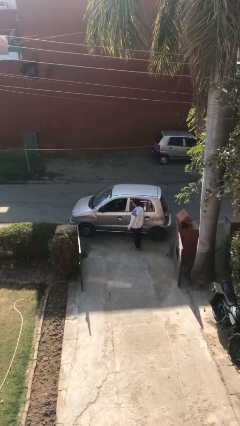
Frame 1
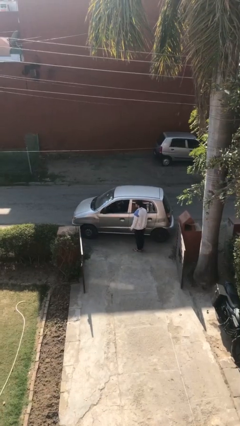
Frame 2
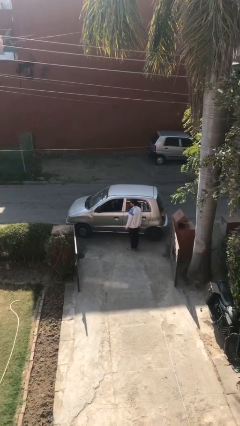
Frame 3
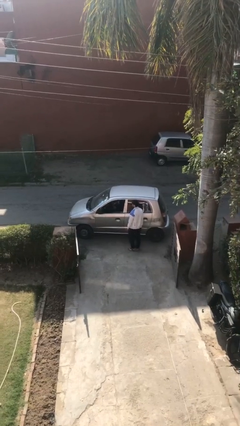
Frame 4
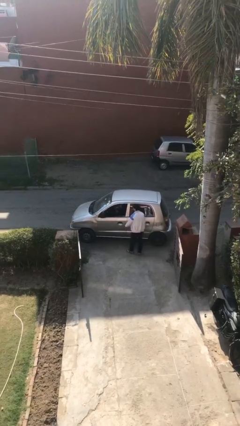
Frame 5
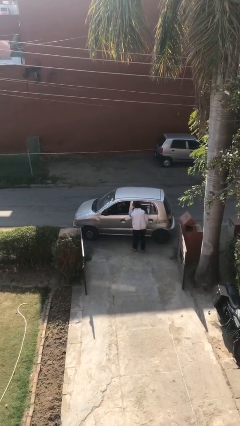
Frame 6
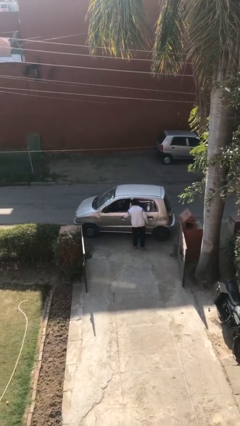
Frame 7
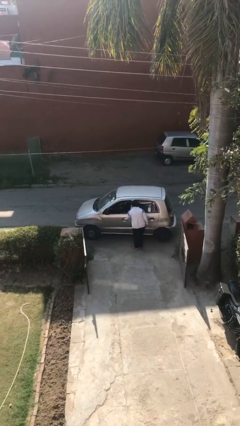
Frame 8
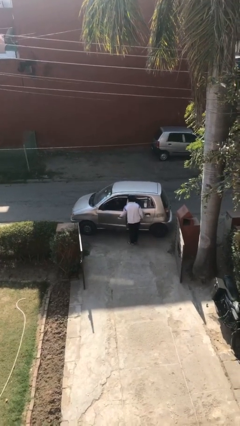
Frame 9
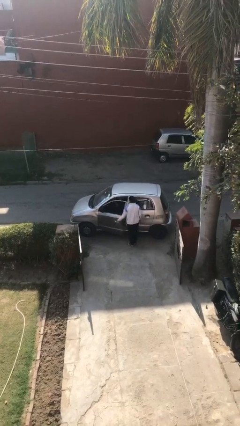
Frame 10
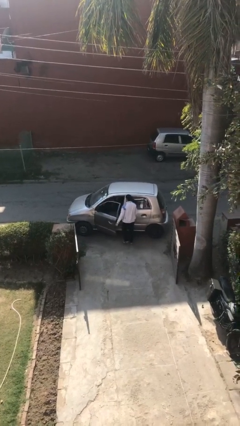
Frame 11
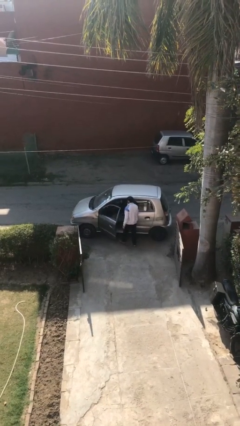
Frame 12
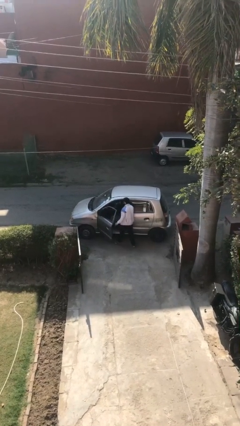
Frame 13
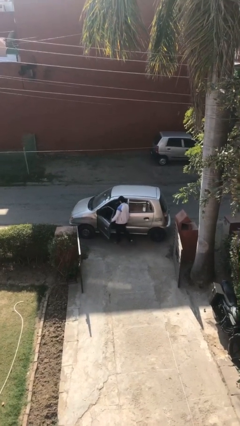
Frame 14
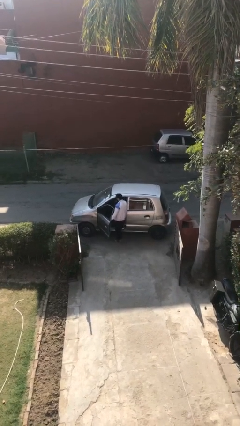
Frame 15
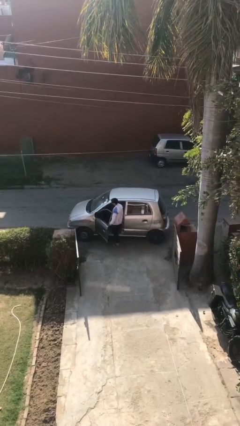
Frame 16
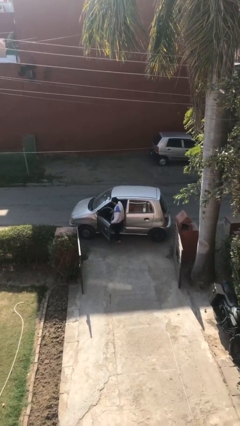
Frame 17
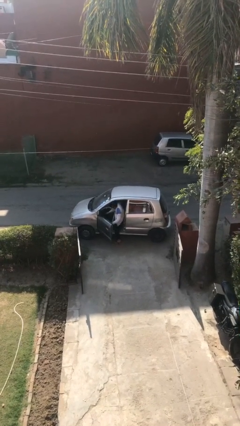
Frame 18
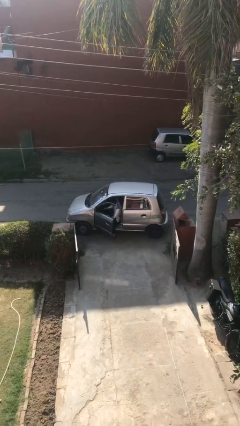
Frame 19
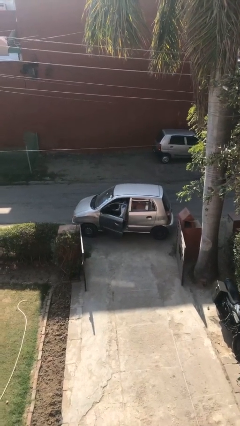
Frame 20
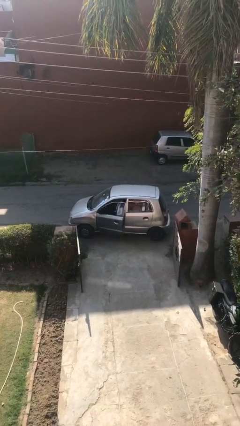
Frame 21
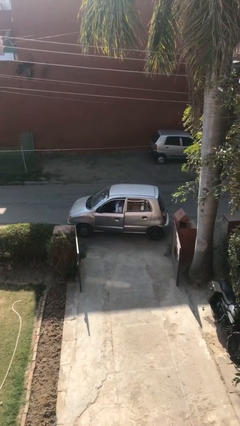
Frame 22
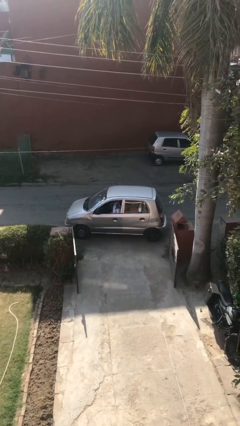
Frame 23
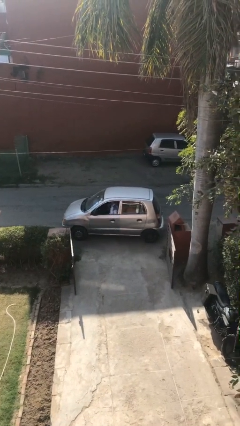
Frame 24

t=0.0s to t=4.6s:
car picks up person

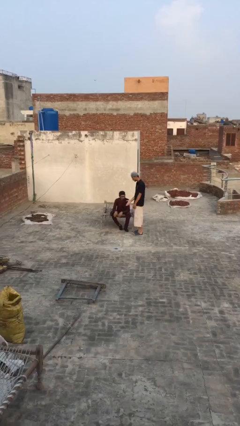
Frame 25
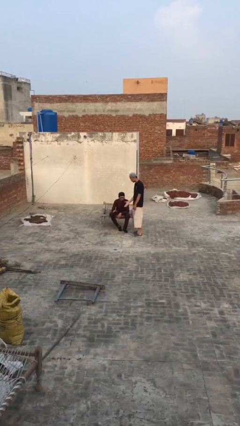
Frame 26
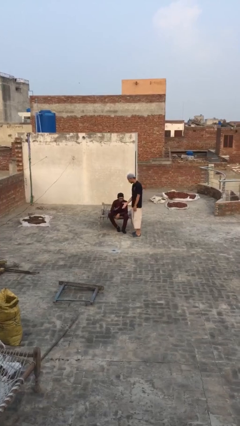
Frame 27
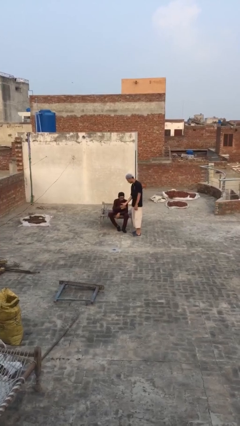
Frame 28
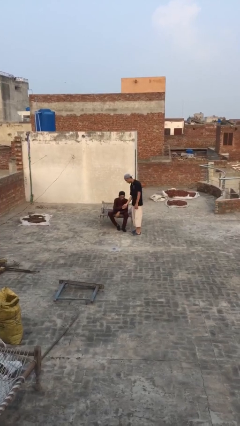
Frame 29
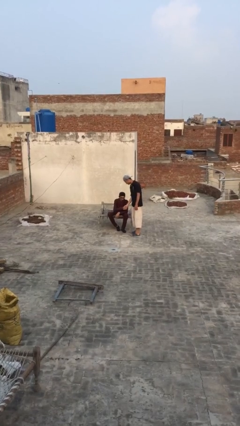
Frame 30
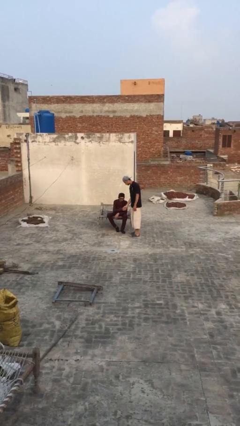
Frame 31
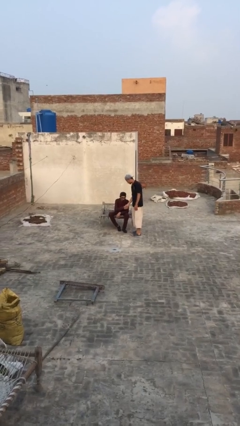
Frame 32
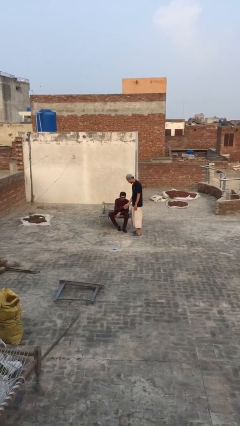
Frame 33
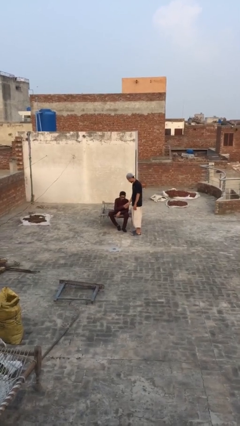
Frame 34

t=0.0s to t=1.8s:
person shakes hand

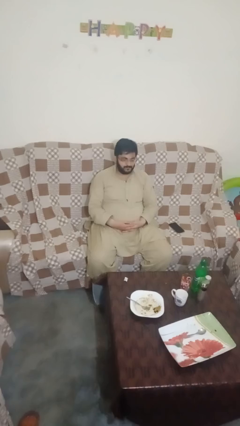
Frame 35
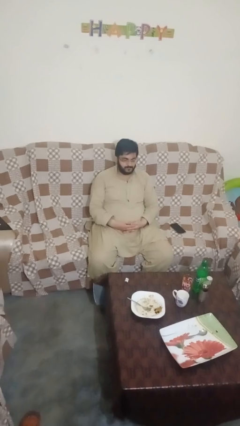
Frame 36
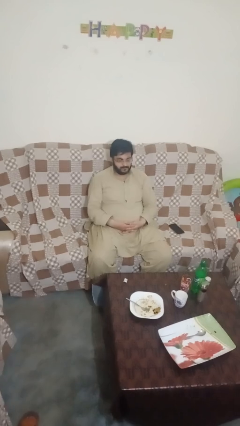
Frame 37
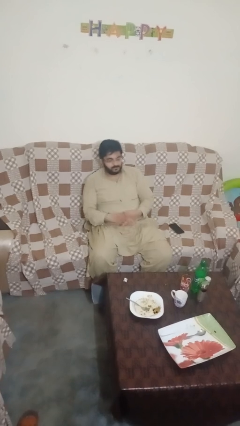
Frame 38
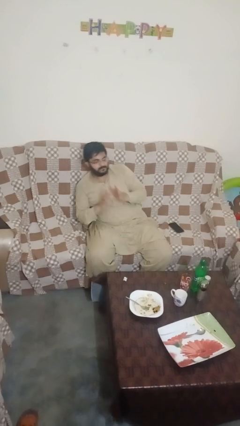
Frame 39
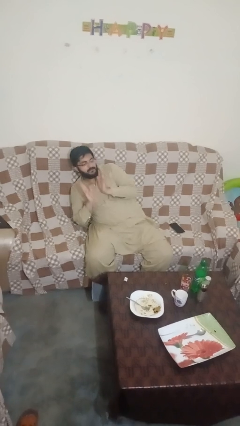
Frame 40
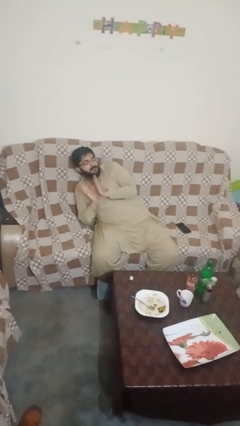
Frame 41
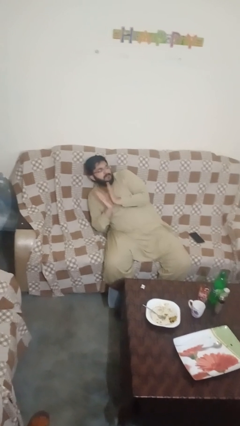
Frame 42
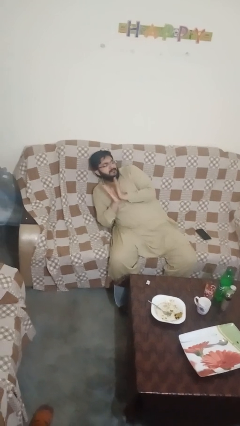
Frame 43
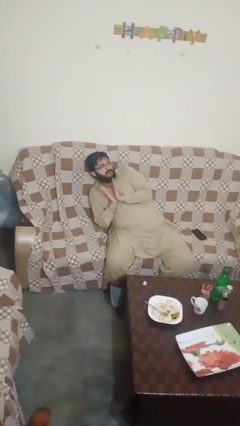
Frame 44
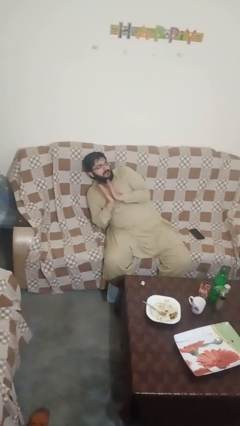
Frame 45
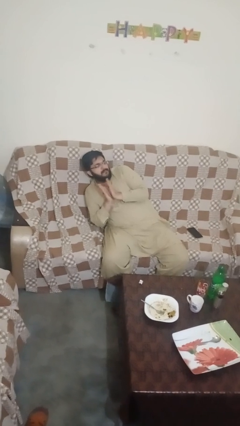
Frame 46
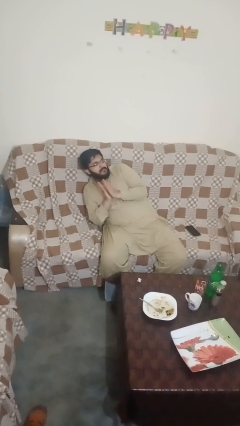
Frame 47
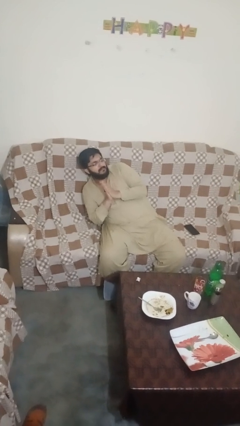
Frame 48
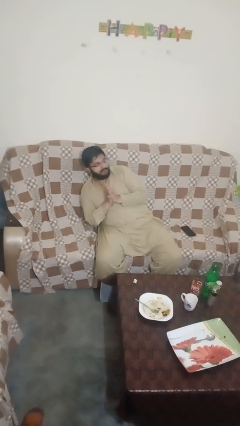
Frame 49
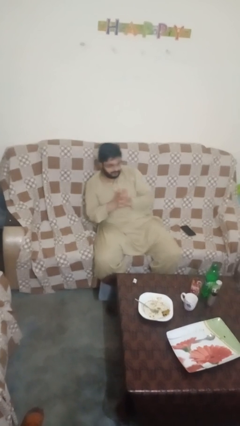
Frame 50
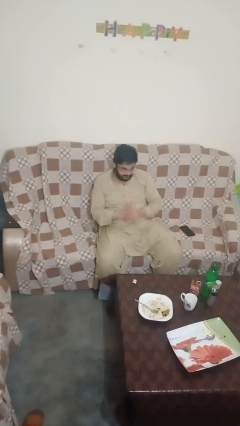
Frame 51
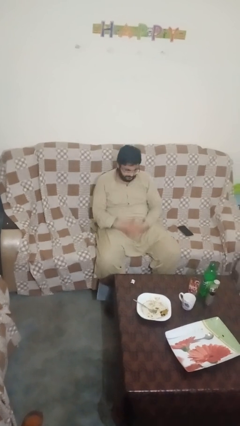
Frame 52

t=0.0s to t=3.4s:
person claps hands

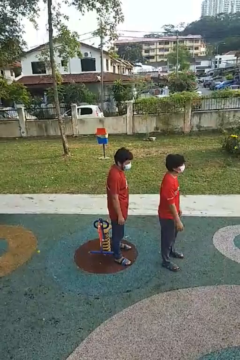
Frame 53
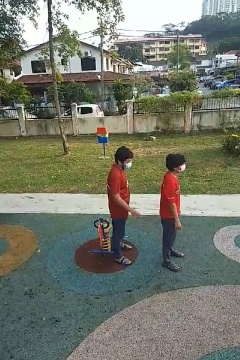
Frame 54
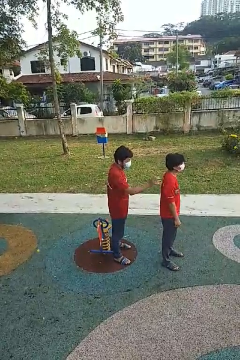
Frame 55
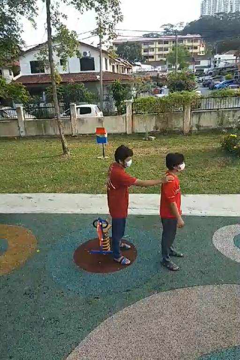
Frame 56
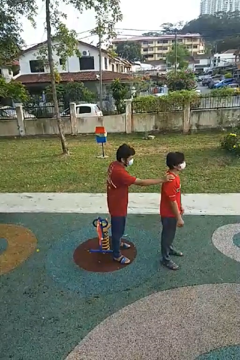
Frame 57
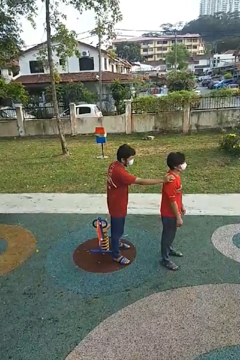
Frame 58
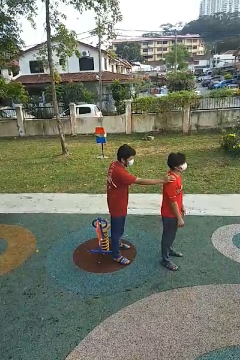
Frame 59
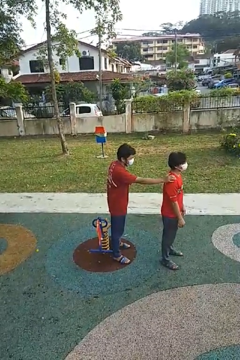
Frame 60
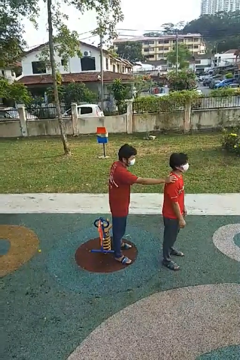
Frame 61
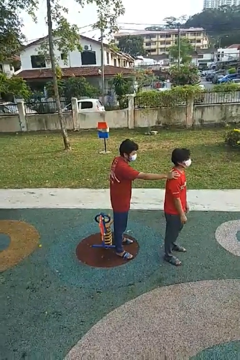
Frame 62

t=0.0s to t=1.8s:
person grabs person by shoulder

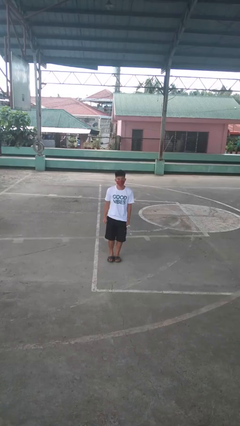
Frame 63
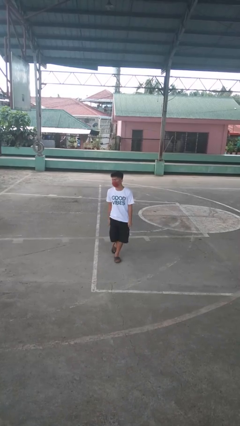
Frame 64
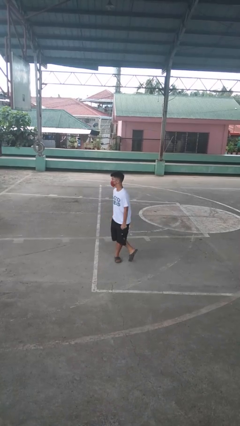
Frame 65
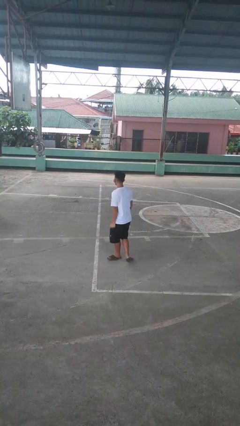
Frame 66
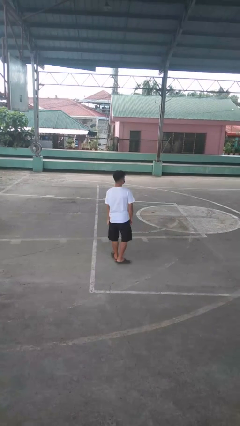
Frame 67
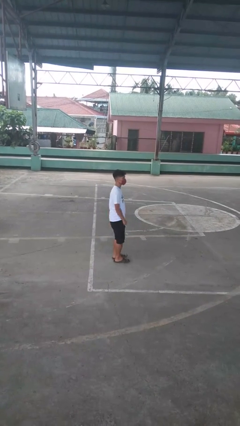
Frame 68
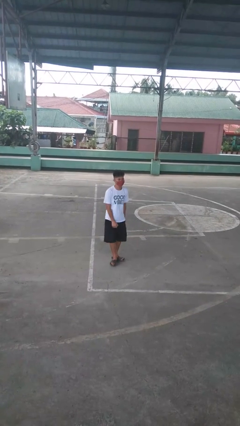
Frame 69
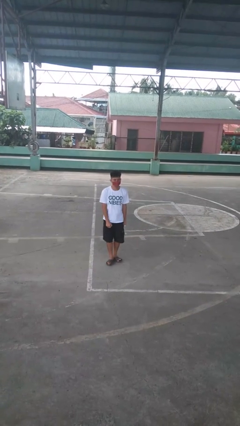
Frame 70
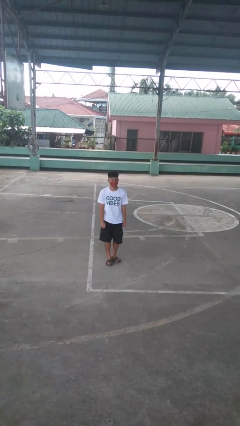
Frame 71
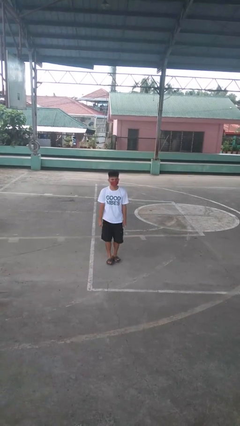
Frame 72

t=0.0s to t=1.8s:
person twirls

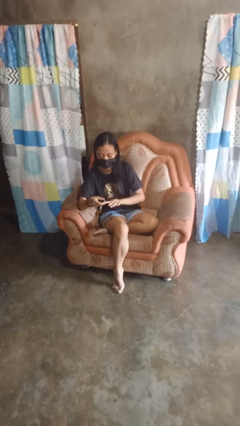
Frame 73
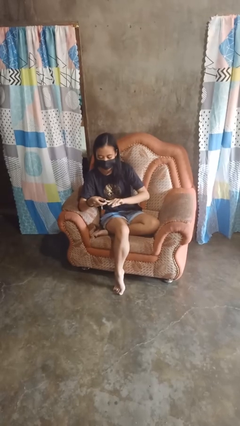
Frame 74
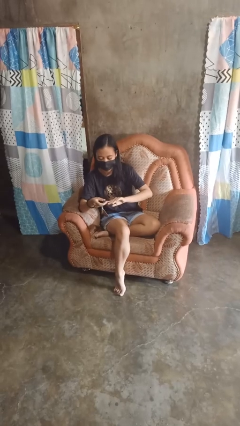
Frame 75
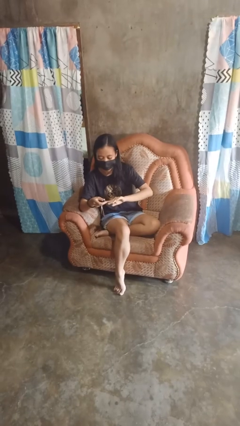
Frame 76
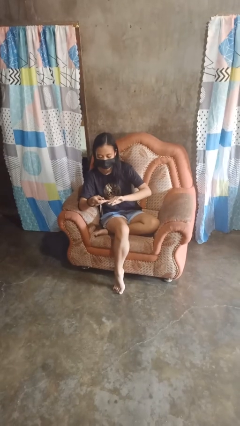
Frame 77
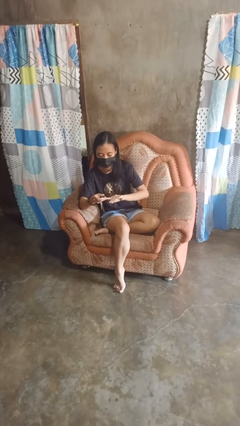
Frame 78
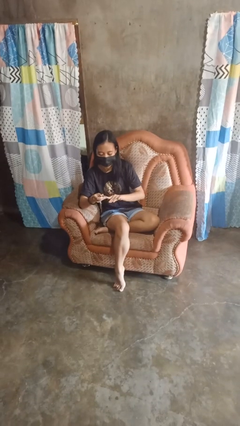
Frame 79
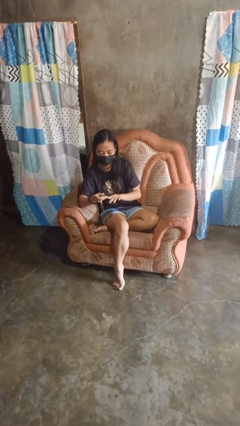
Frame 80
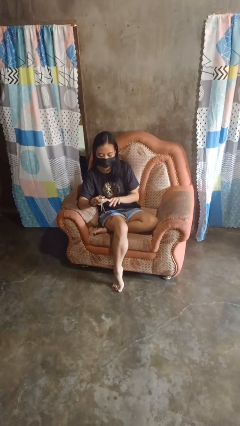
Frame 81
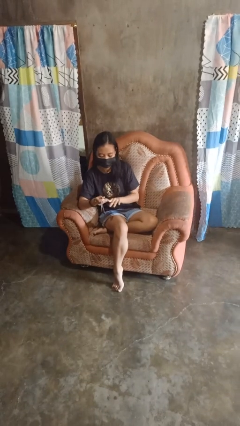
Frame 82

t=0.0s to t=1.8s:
person clips fingernails

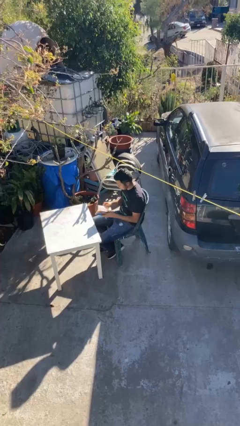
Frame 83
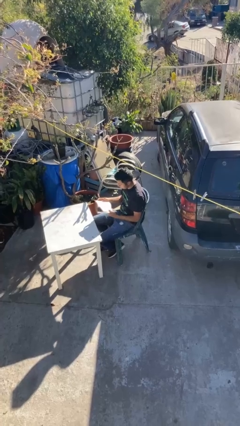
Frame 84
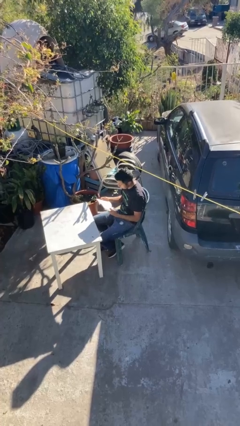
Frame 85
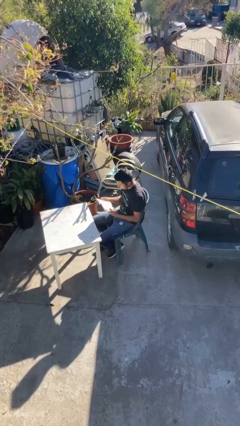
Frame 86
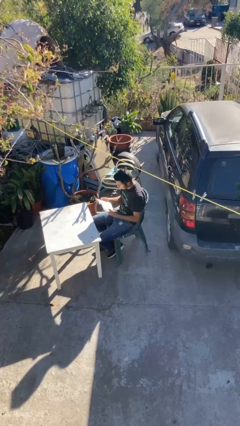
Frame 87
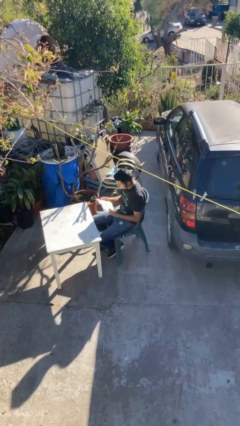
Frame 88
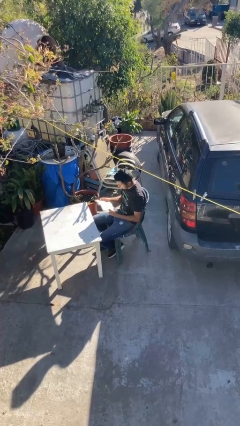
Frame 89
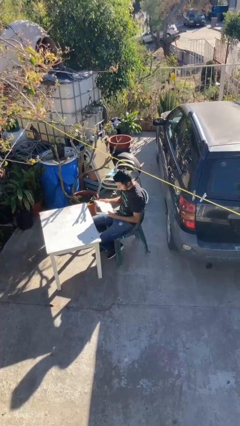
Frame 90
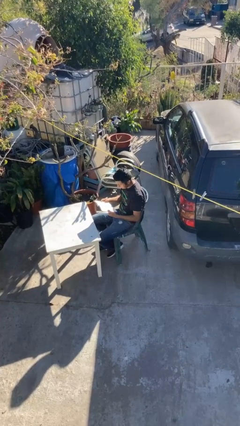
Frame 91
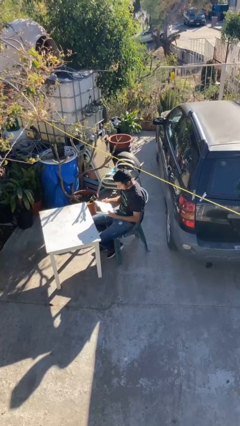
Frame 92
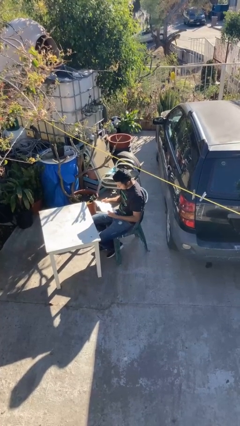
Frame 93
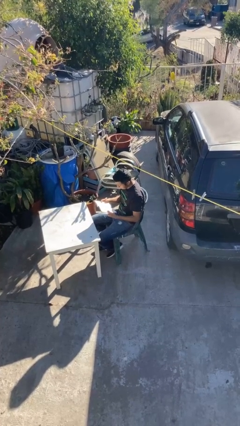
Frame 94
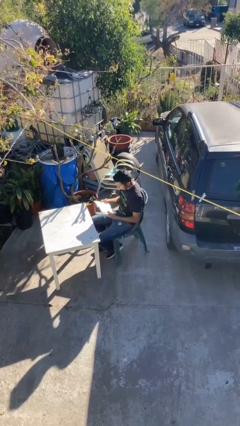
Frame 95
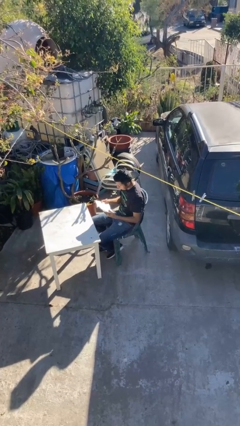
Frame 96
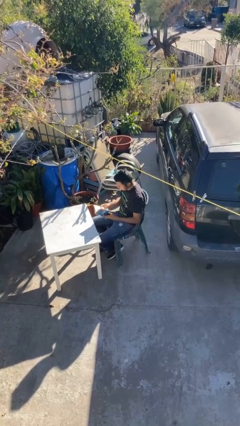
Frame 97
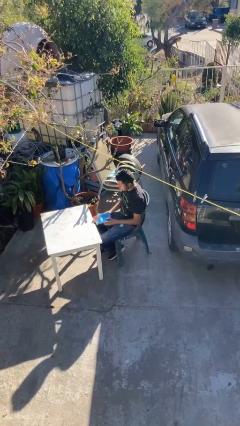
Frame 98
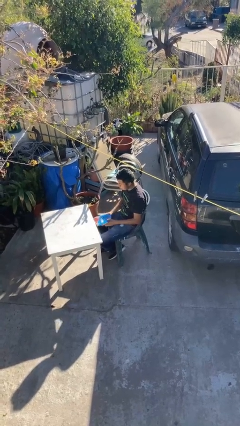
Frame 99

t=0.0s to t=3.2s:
person reads document
